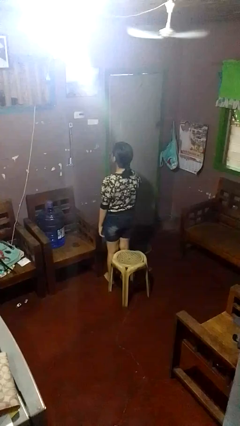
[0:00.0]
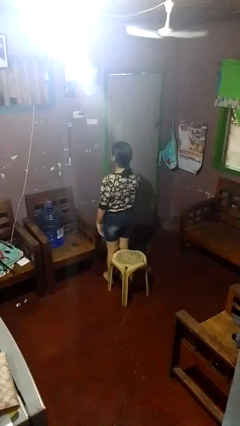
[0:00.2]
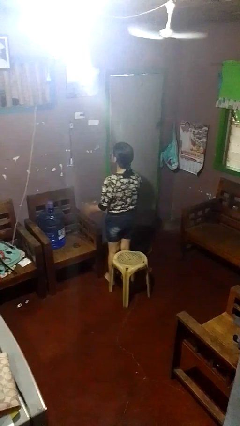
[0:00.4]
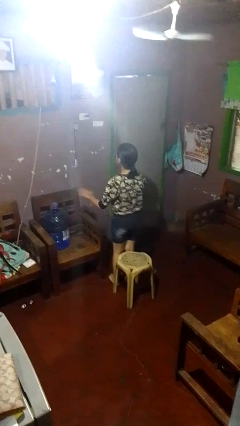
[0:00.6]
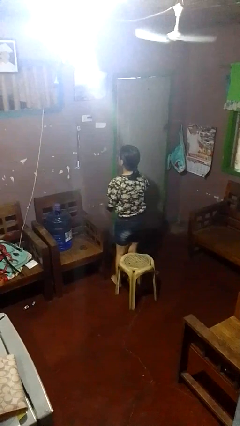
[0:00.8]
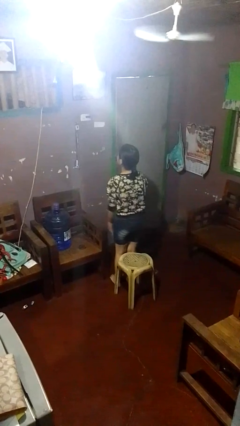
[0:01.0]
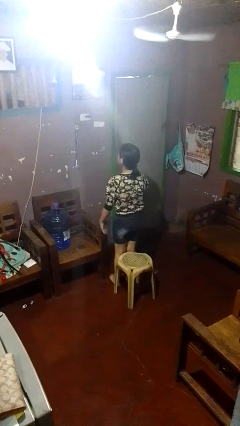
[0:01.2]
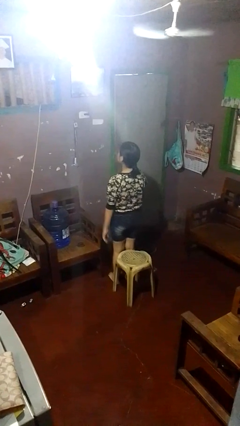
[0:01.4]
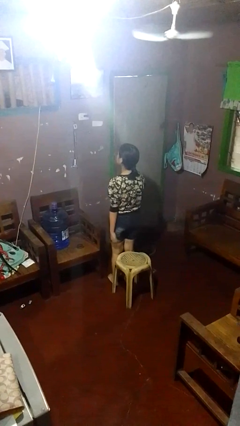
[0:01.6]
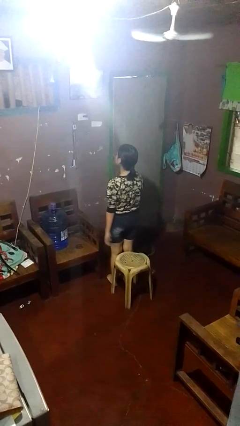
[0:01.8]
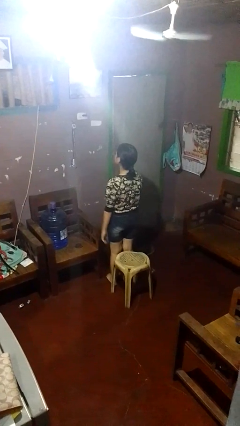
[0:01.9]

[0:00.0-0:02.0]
person slaps hands on thighs

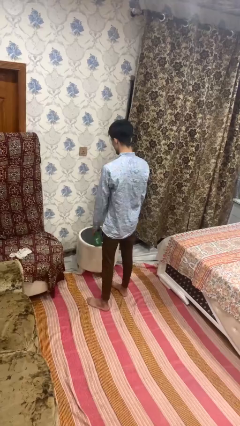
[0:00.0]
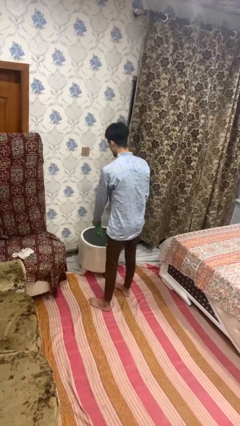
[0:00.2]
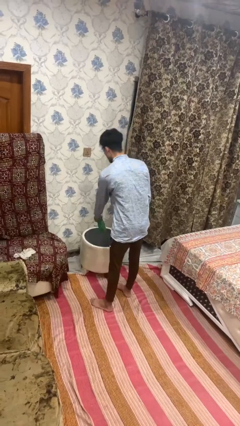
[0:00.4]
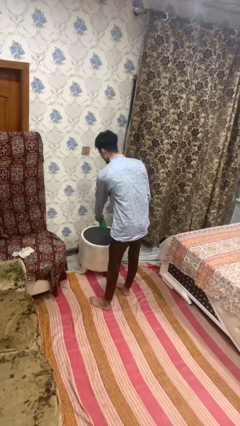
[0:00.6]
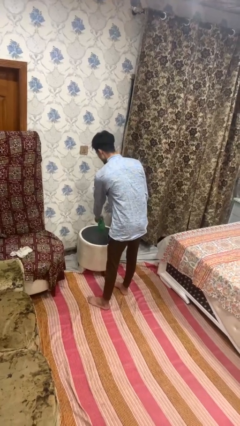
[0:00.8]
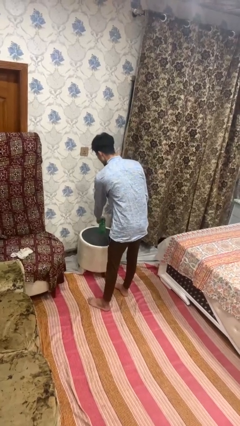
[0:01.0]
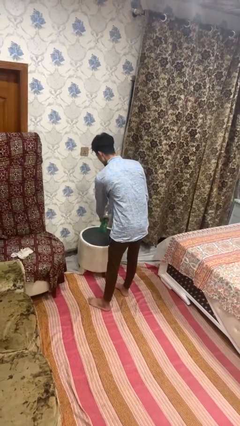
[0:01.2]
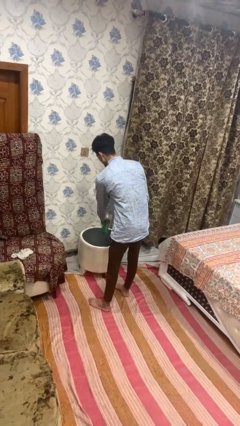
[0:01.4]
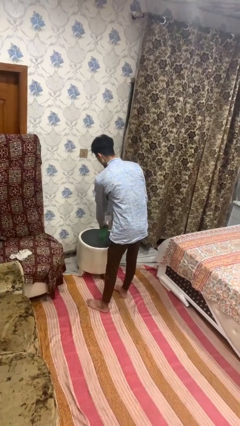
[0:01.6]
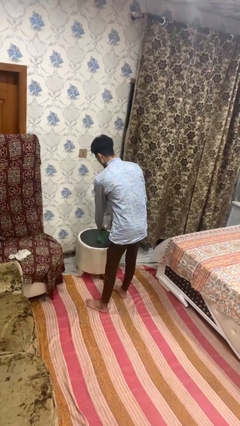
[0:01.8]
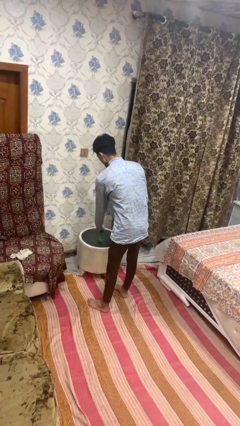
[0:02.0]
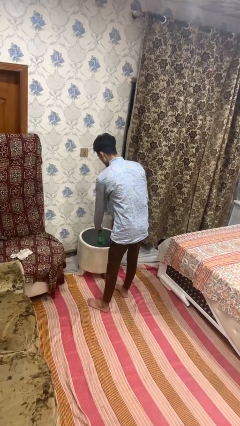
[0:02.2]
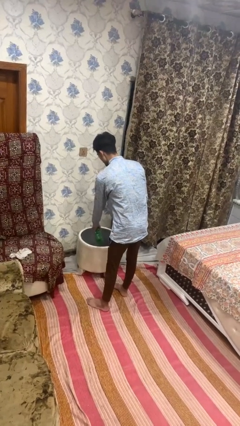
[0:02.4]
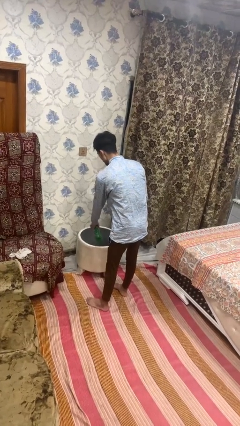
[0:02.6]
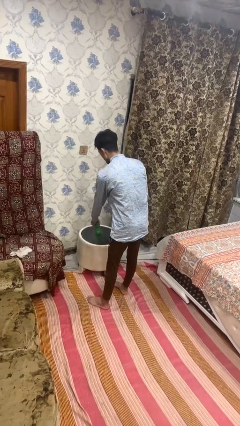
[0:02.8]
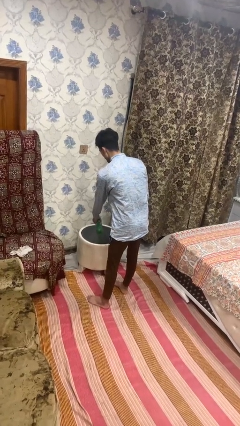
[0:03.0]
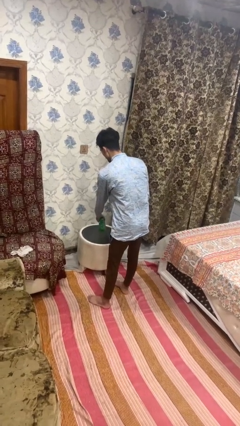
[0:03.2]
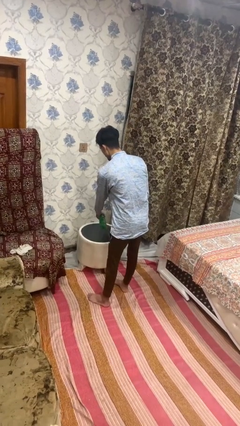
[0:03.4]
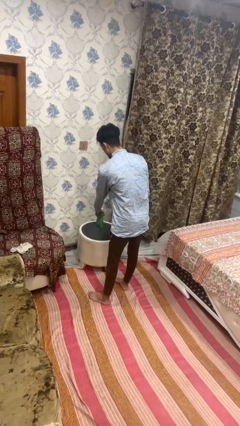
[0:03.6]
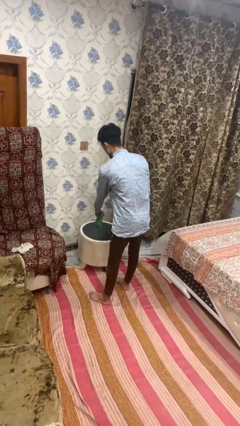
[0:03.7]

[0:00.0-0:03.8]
person sprays from bottle

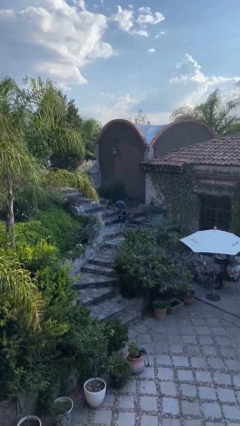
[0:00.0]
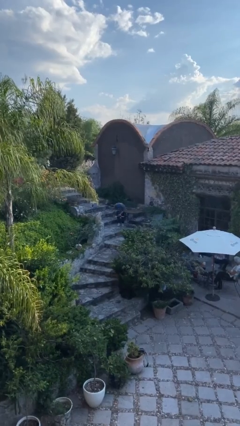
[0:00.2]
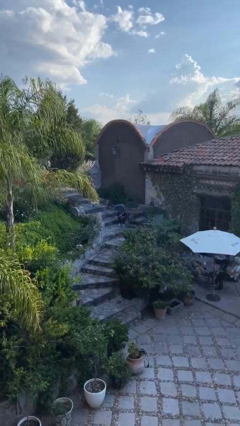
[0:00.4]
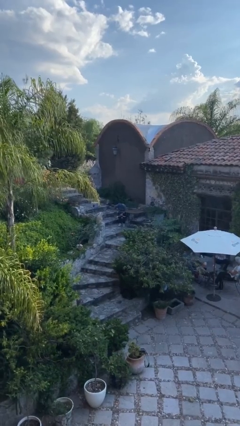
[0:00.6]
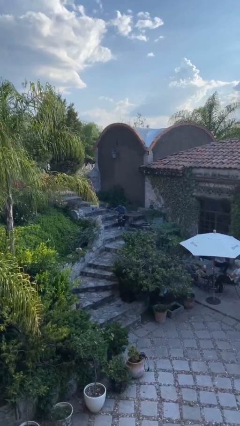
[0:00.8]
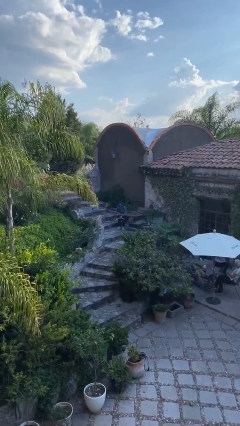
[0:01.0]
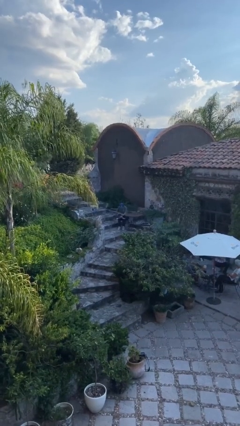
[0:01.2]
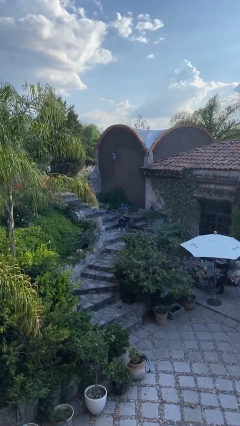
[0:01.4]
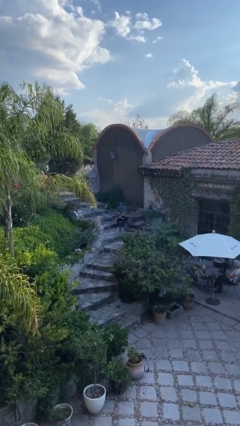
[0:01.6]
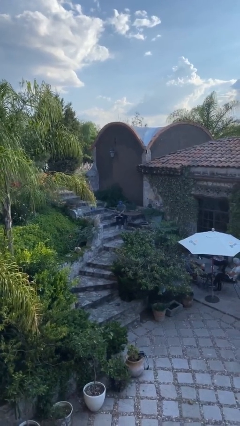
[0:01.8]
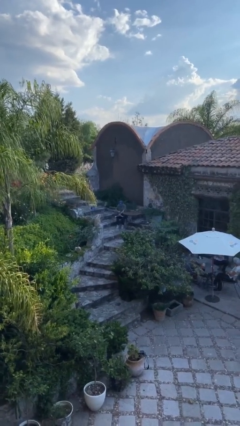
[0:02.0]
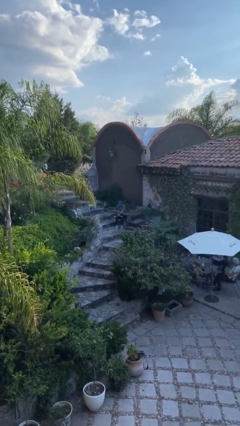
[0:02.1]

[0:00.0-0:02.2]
person sits down

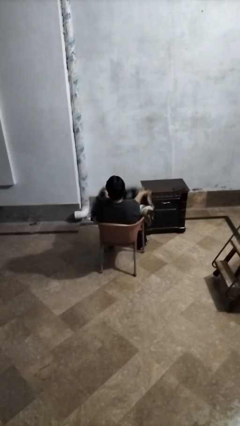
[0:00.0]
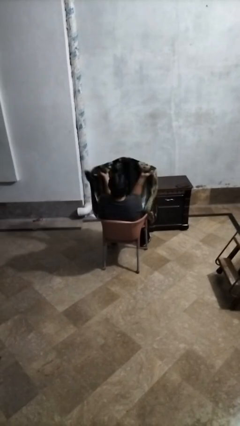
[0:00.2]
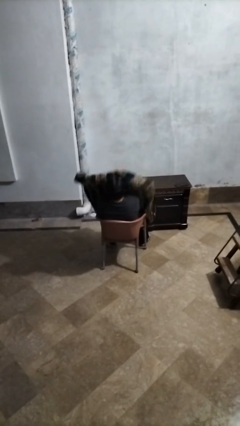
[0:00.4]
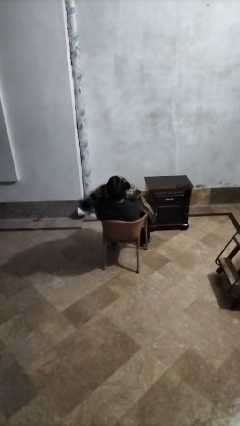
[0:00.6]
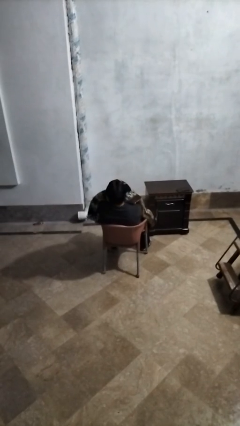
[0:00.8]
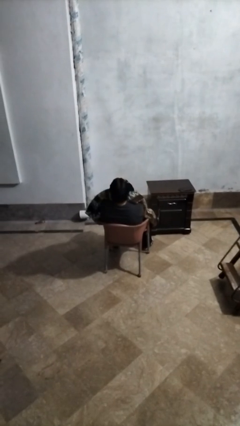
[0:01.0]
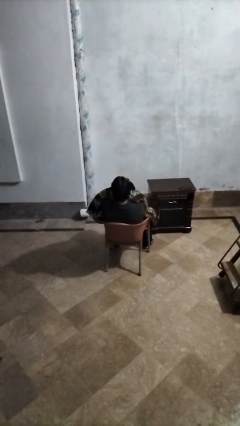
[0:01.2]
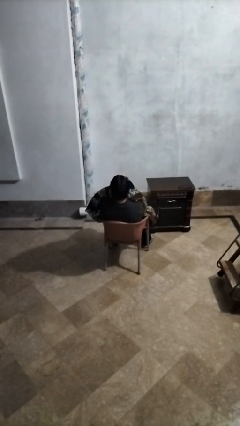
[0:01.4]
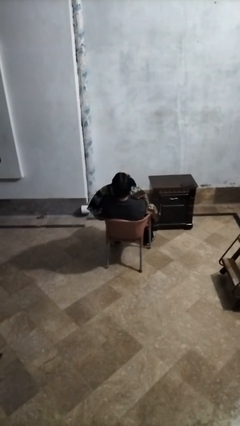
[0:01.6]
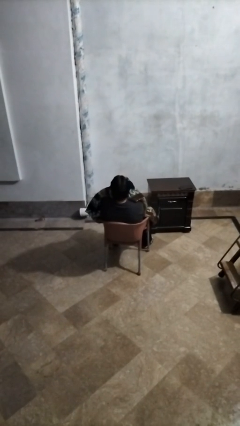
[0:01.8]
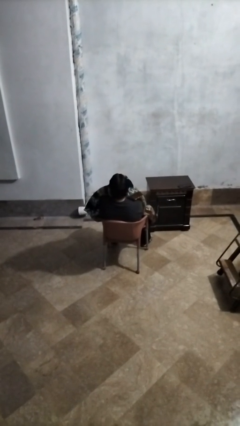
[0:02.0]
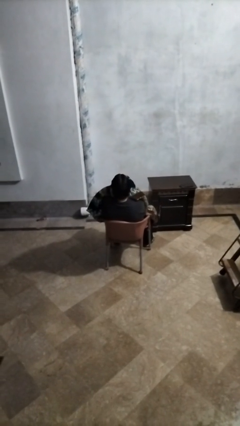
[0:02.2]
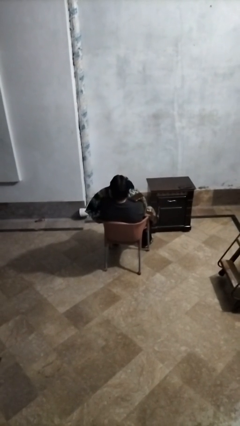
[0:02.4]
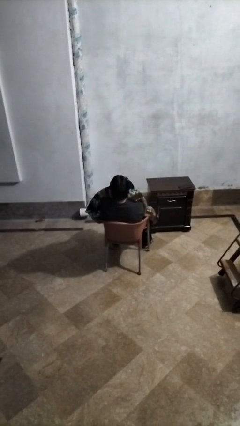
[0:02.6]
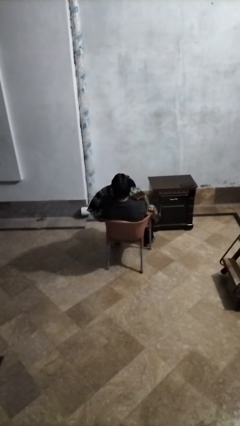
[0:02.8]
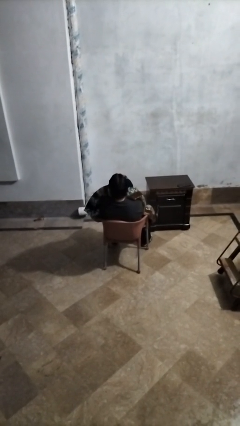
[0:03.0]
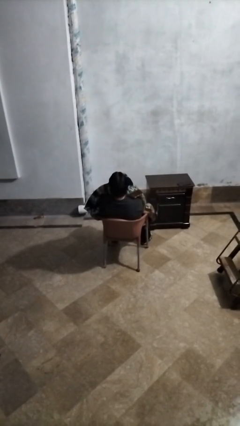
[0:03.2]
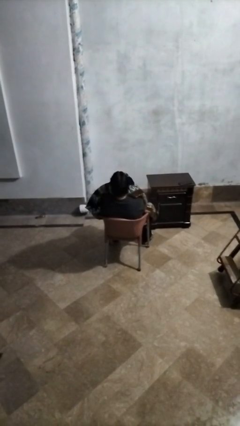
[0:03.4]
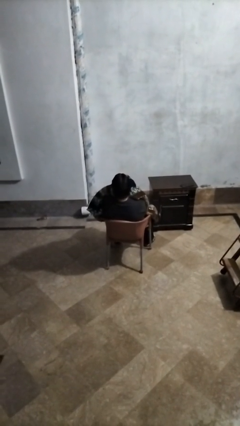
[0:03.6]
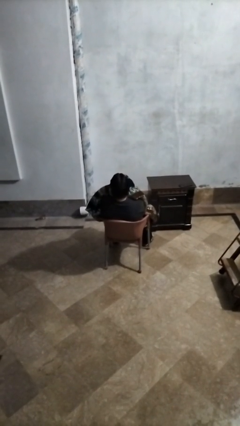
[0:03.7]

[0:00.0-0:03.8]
person covers with blanket

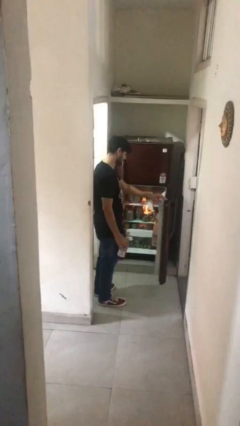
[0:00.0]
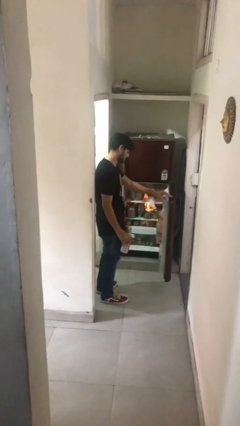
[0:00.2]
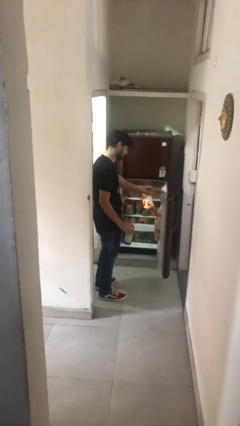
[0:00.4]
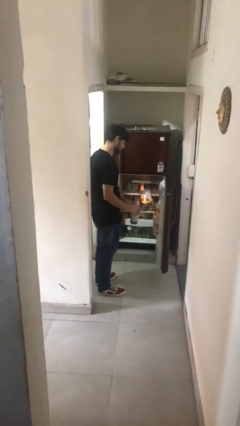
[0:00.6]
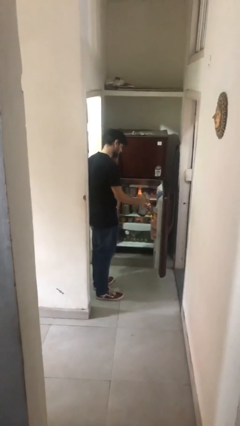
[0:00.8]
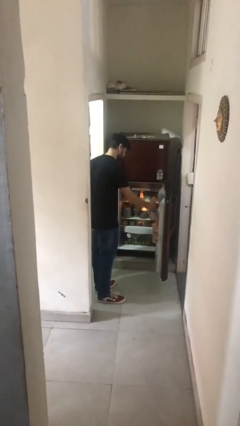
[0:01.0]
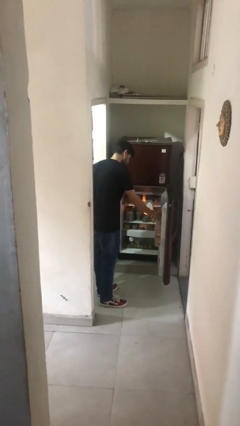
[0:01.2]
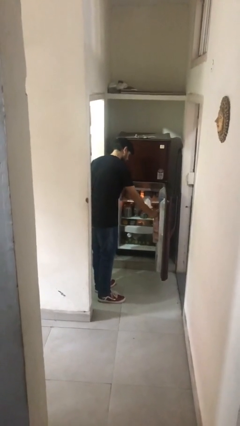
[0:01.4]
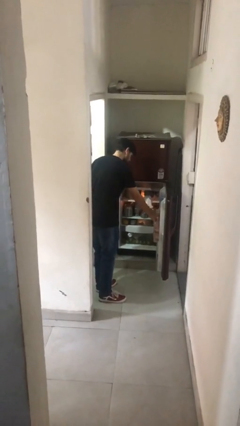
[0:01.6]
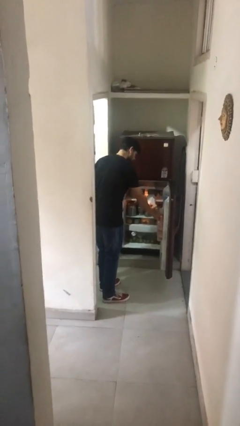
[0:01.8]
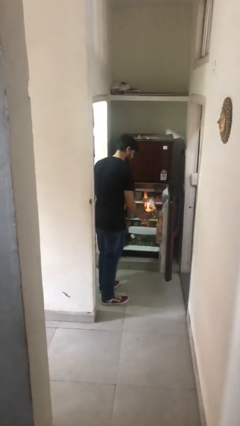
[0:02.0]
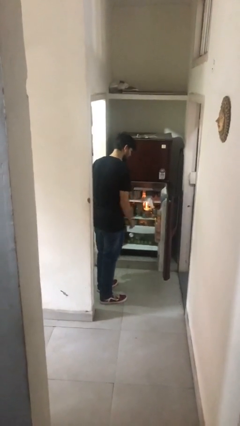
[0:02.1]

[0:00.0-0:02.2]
person puts object into refrigerator

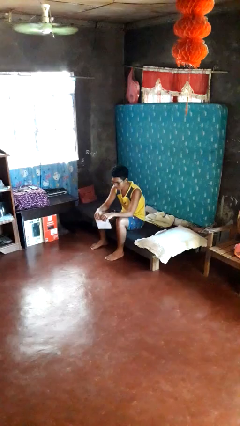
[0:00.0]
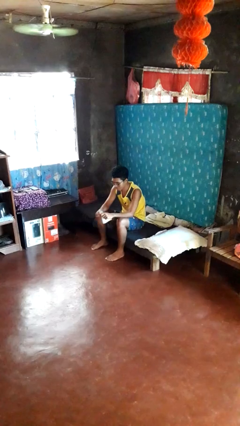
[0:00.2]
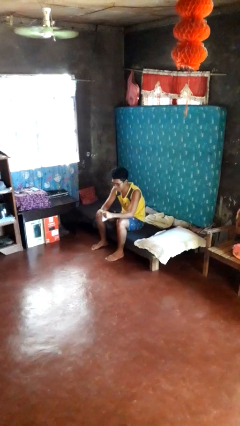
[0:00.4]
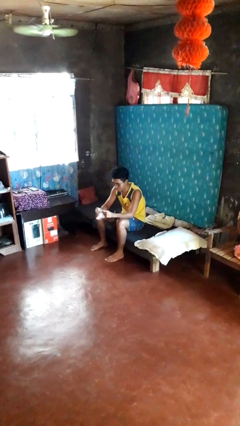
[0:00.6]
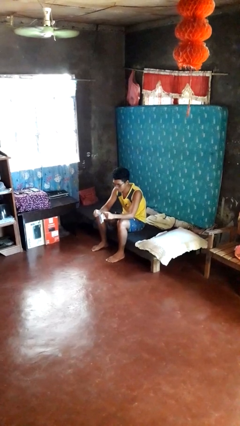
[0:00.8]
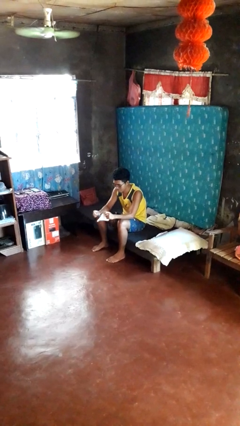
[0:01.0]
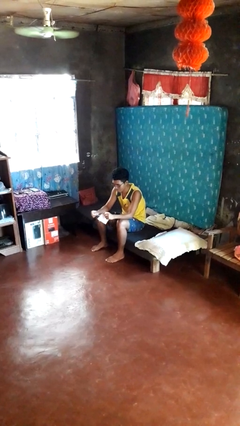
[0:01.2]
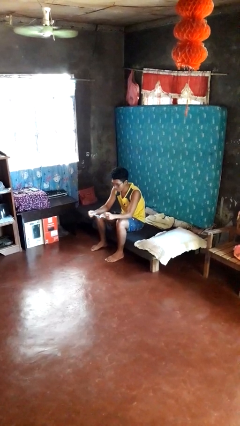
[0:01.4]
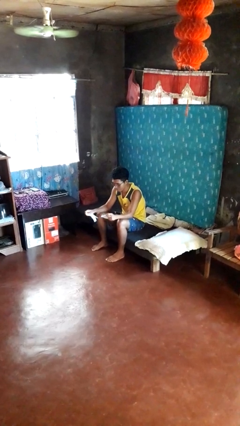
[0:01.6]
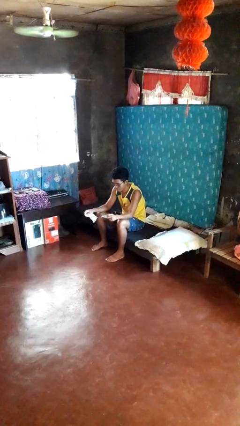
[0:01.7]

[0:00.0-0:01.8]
person tears paper

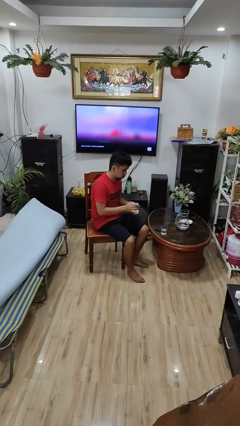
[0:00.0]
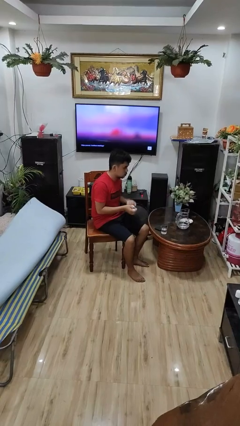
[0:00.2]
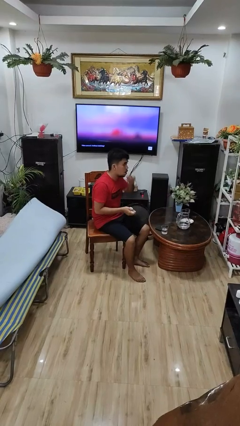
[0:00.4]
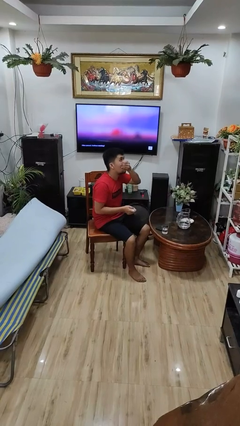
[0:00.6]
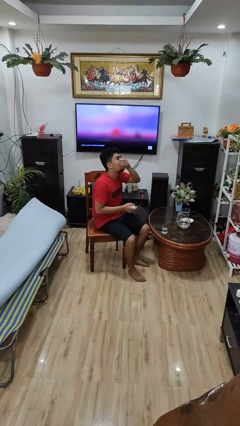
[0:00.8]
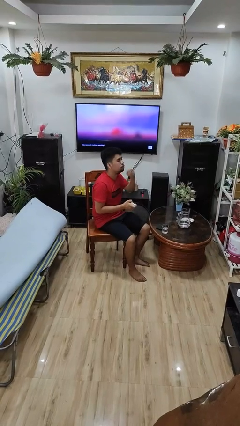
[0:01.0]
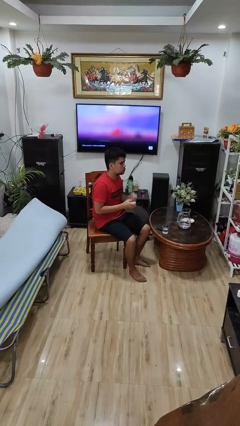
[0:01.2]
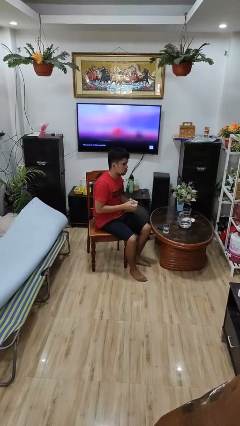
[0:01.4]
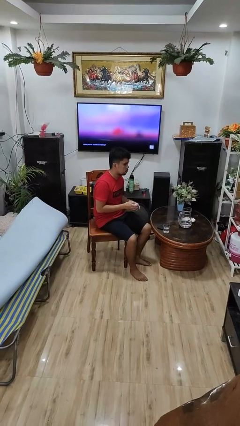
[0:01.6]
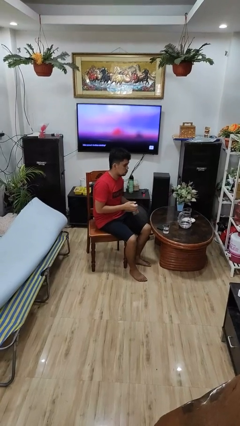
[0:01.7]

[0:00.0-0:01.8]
person takes medicine pills
